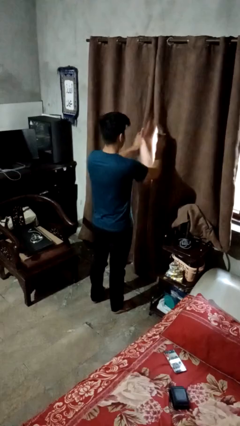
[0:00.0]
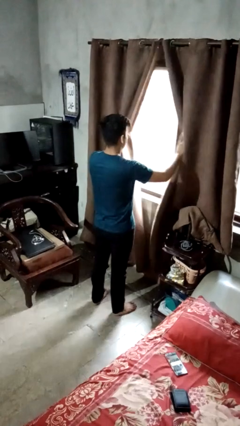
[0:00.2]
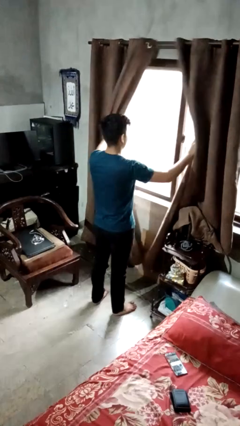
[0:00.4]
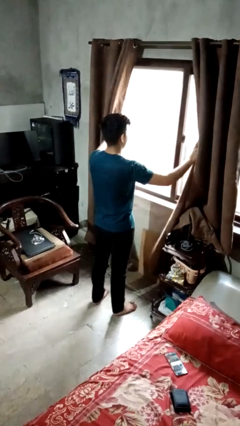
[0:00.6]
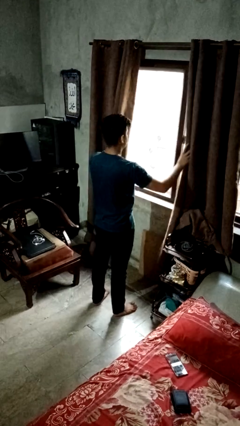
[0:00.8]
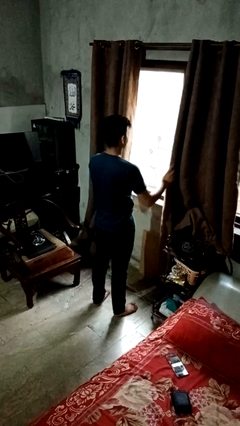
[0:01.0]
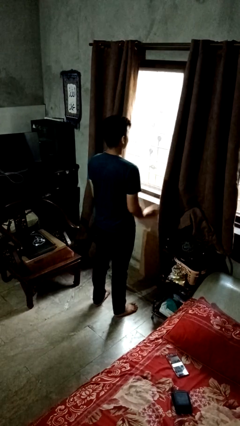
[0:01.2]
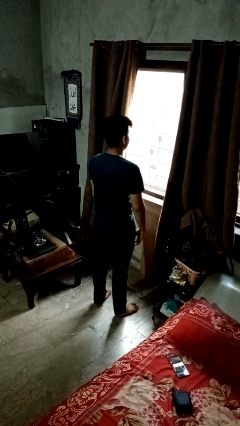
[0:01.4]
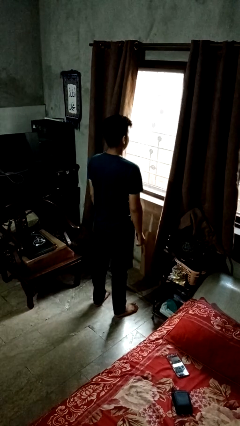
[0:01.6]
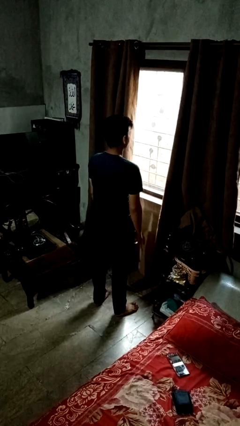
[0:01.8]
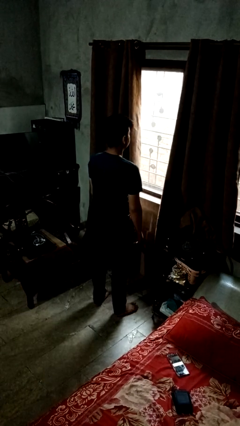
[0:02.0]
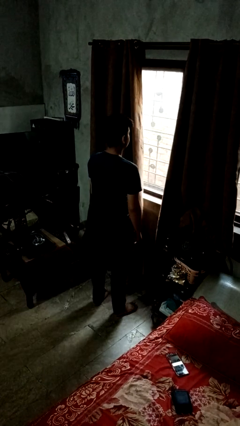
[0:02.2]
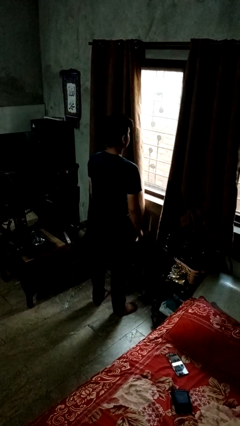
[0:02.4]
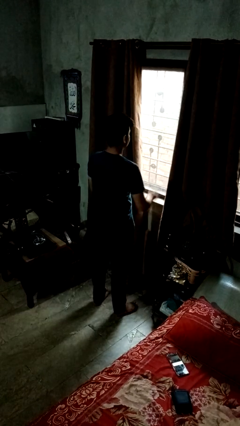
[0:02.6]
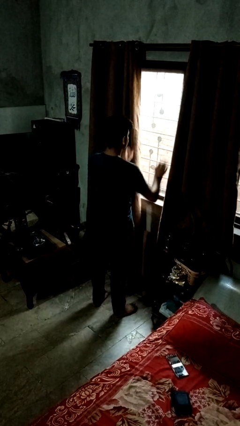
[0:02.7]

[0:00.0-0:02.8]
person opens curtains

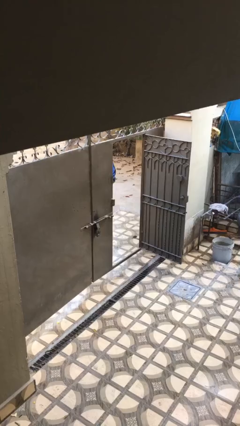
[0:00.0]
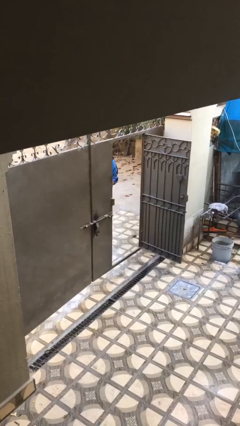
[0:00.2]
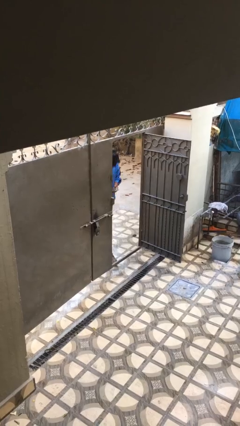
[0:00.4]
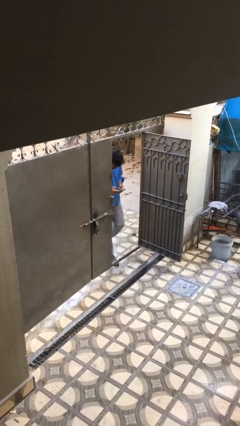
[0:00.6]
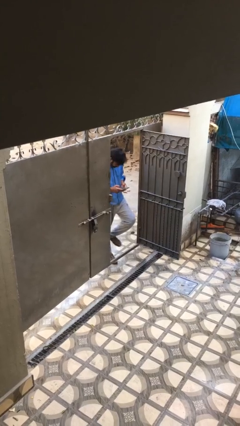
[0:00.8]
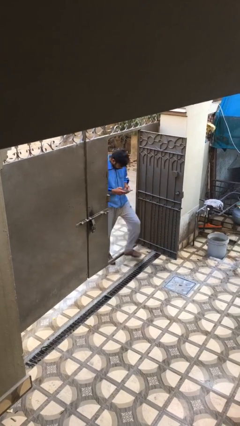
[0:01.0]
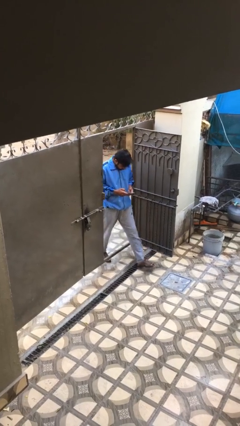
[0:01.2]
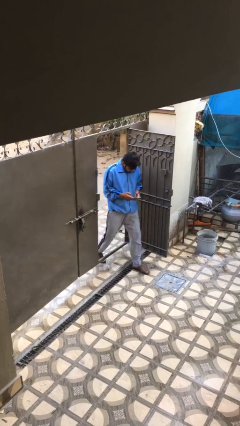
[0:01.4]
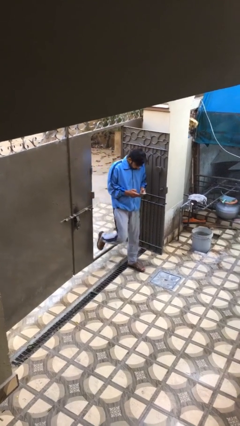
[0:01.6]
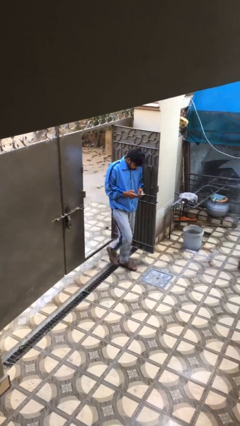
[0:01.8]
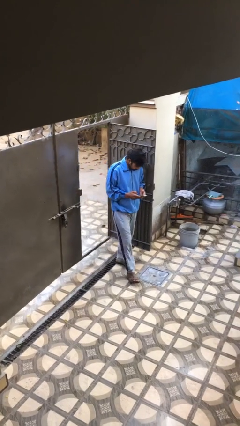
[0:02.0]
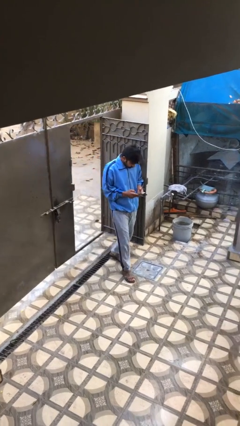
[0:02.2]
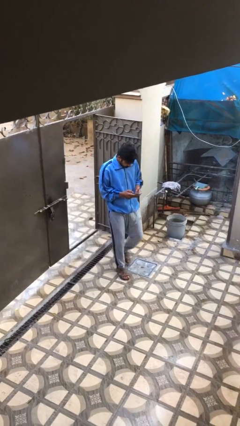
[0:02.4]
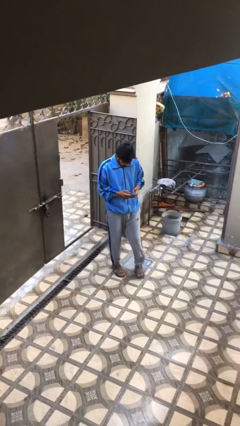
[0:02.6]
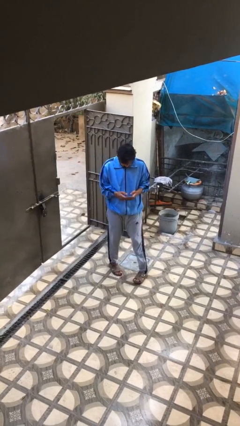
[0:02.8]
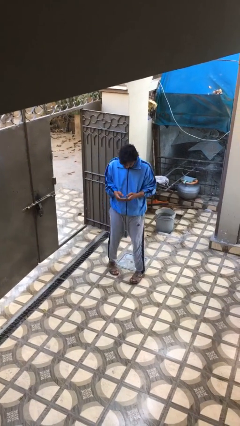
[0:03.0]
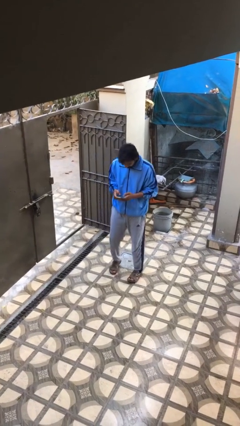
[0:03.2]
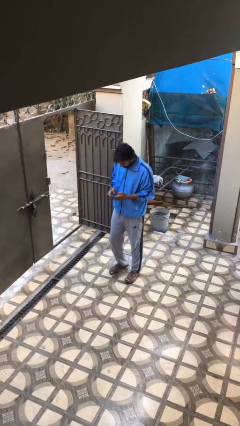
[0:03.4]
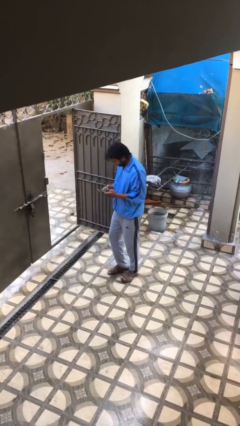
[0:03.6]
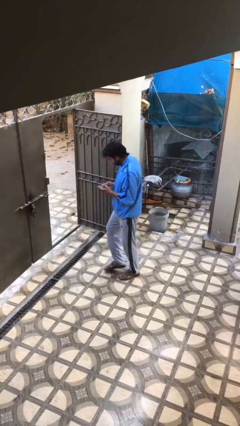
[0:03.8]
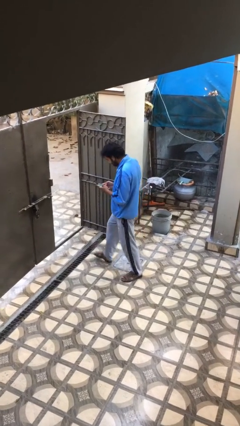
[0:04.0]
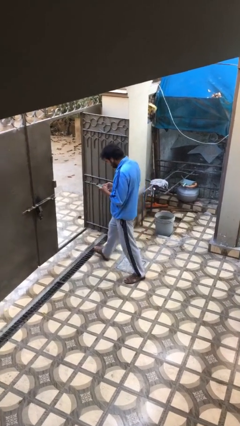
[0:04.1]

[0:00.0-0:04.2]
person enters scene through structure

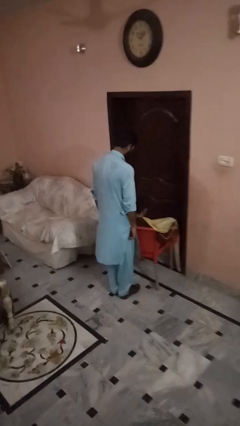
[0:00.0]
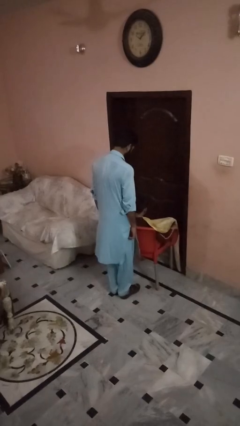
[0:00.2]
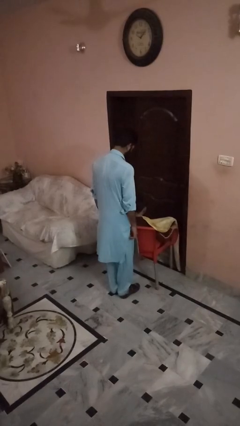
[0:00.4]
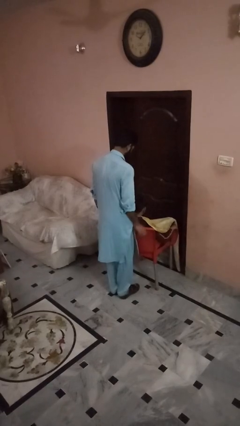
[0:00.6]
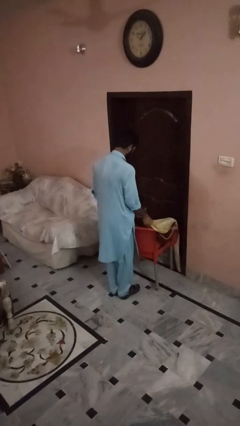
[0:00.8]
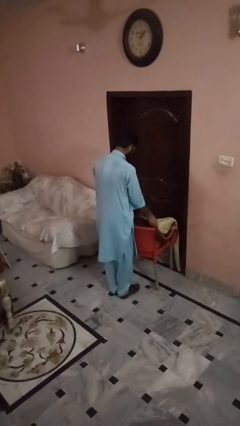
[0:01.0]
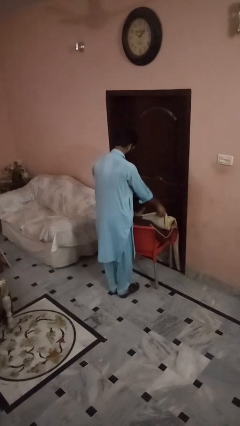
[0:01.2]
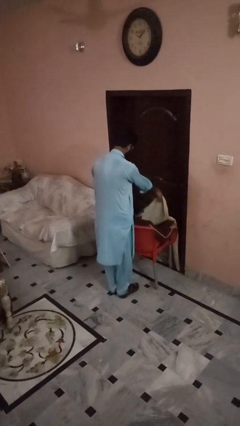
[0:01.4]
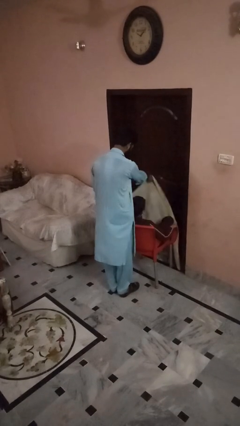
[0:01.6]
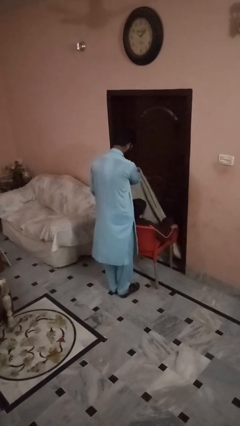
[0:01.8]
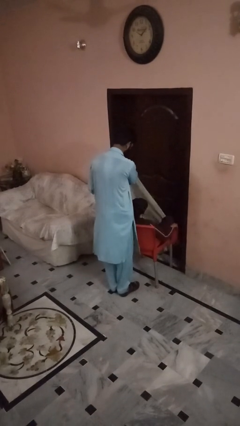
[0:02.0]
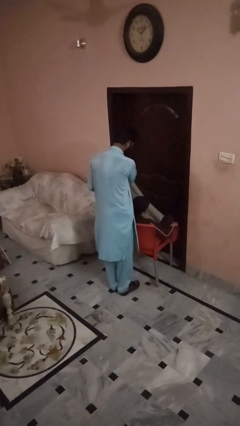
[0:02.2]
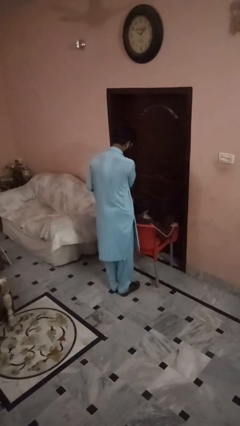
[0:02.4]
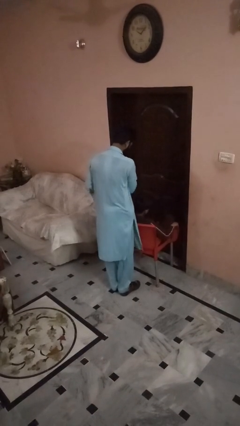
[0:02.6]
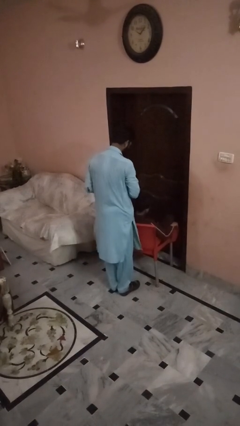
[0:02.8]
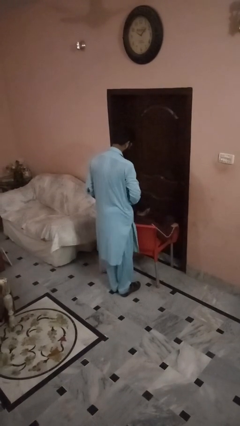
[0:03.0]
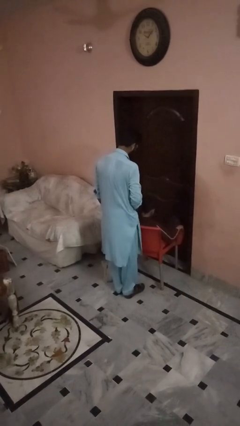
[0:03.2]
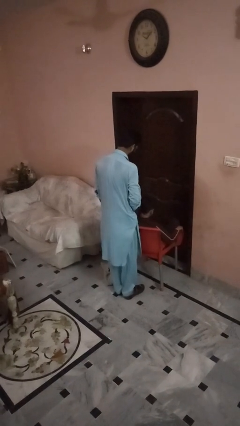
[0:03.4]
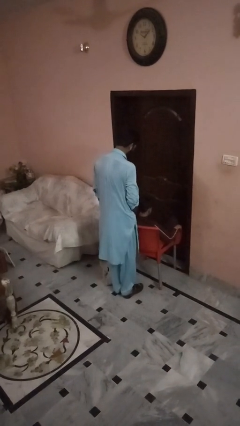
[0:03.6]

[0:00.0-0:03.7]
person uncovers friend with blanket

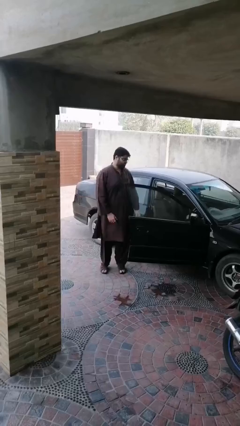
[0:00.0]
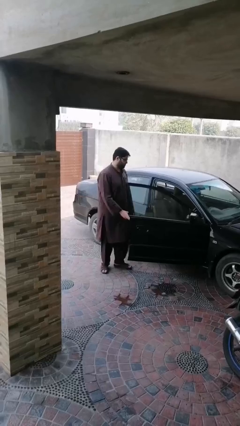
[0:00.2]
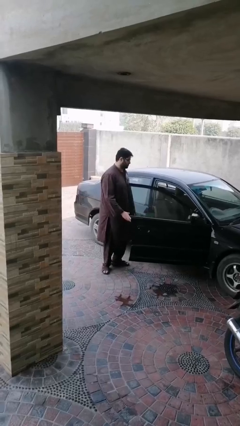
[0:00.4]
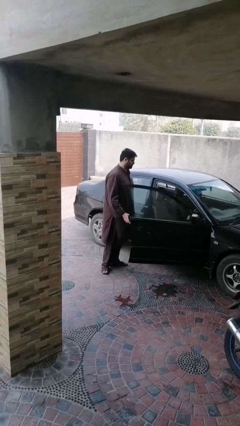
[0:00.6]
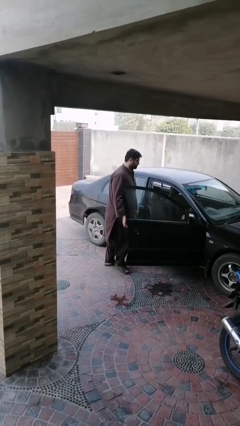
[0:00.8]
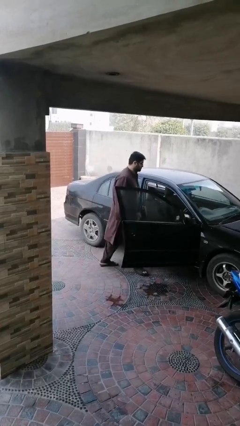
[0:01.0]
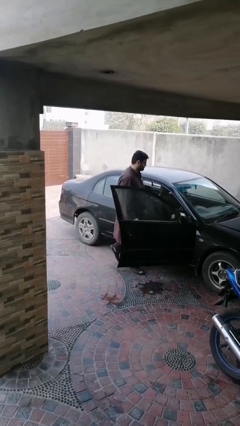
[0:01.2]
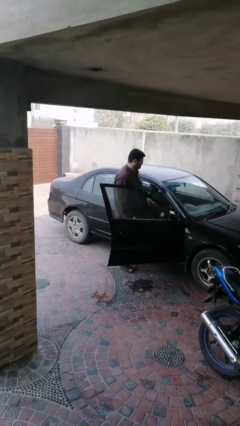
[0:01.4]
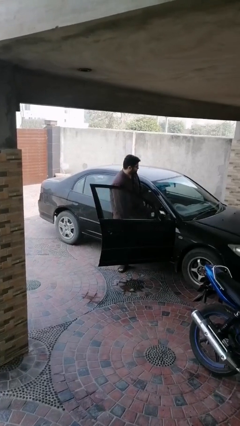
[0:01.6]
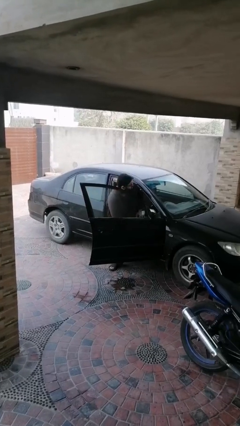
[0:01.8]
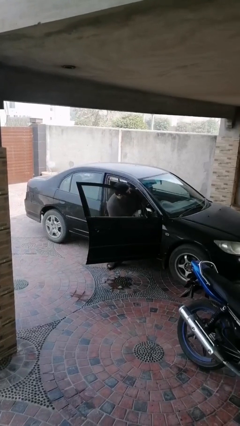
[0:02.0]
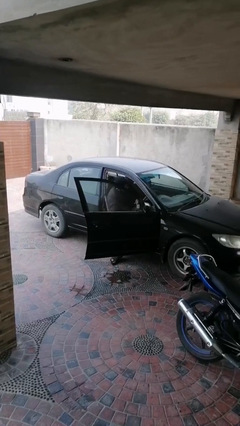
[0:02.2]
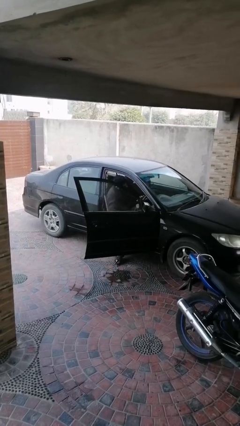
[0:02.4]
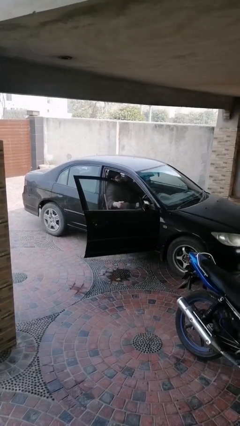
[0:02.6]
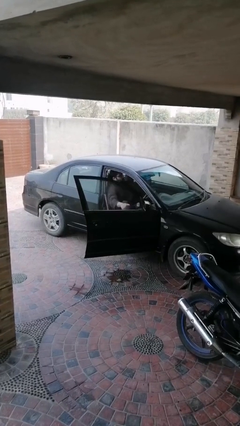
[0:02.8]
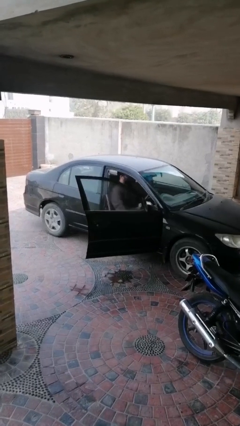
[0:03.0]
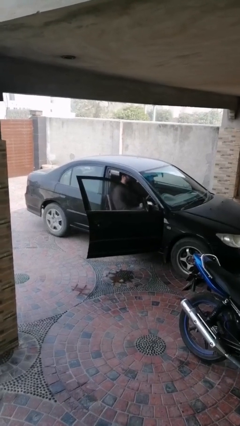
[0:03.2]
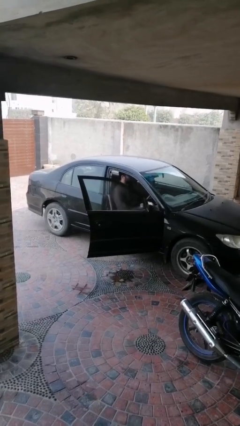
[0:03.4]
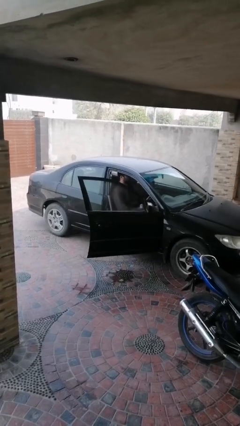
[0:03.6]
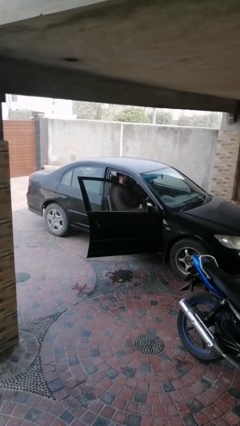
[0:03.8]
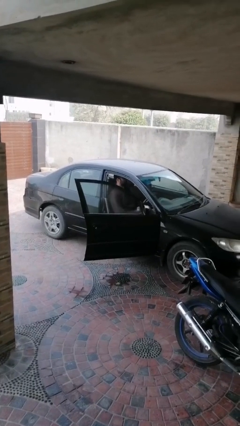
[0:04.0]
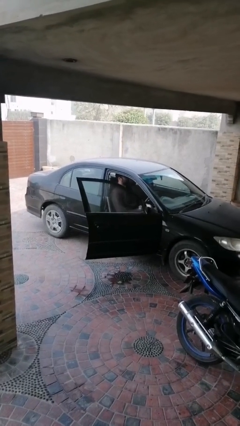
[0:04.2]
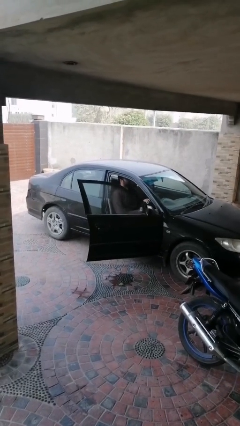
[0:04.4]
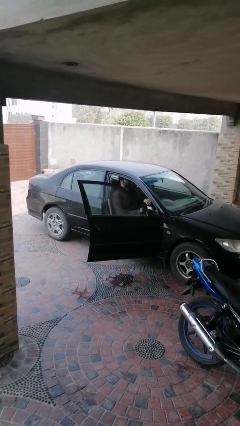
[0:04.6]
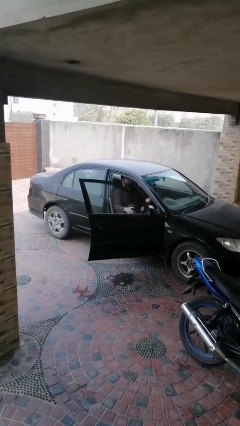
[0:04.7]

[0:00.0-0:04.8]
person enters car

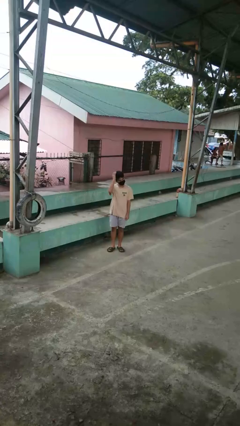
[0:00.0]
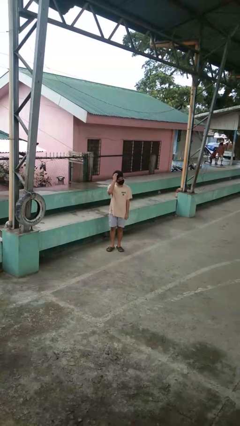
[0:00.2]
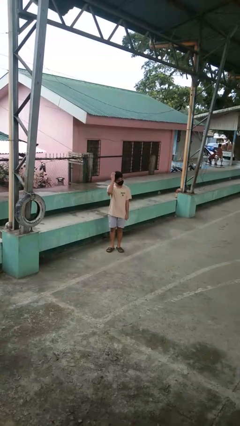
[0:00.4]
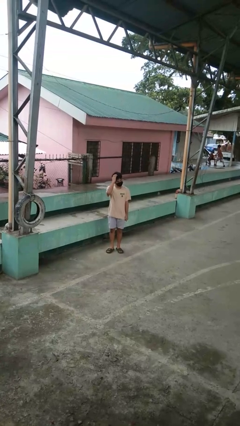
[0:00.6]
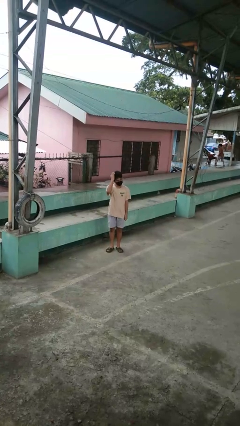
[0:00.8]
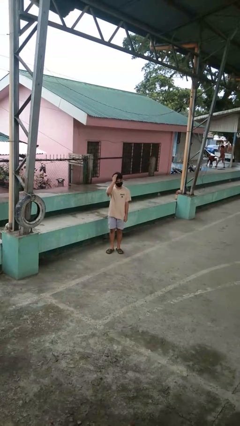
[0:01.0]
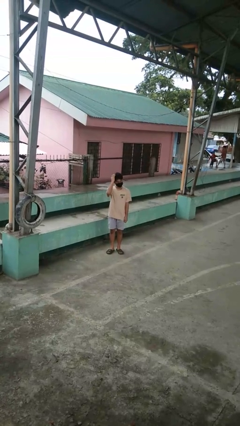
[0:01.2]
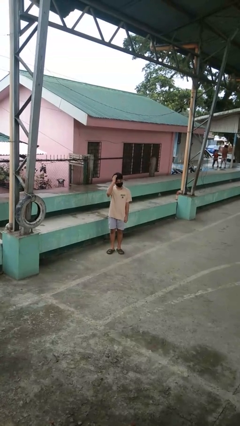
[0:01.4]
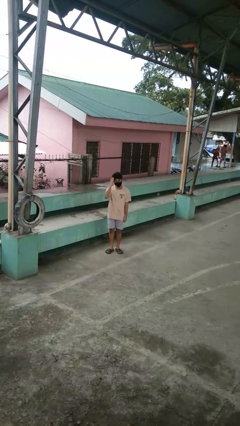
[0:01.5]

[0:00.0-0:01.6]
person pats head

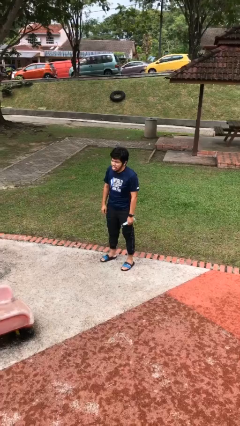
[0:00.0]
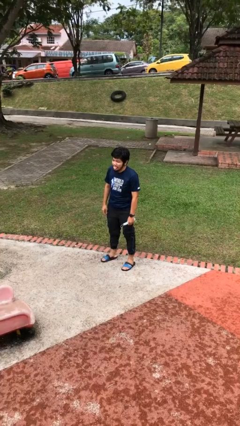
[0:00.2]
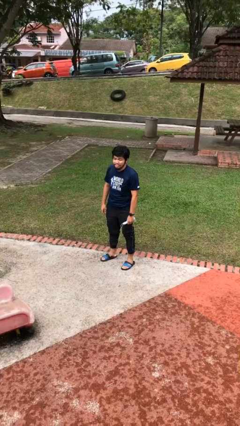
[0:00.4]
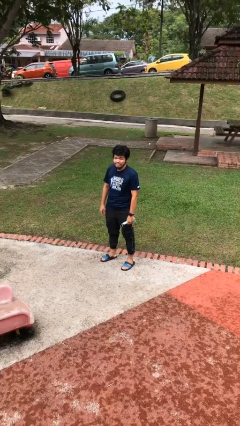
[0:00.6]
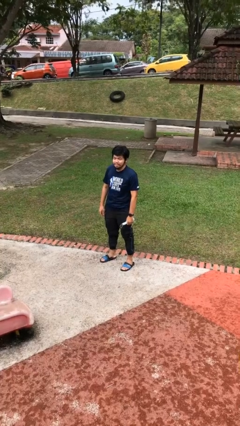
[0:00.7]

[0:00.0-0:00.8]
person sticks out tongue
